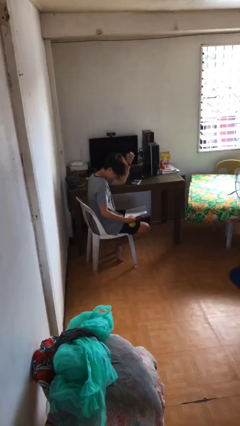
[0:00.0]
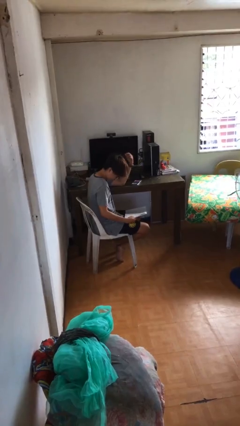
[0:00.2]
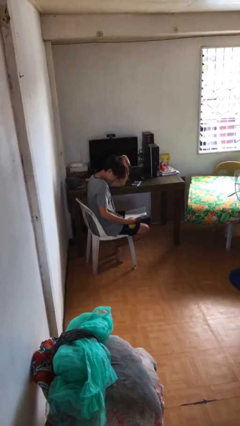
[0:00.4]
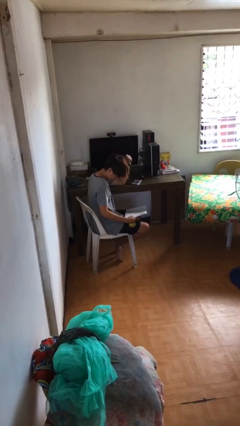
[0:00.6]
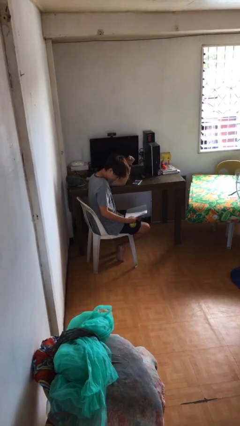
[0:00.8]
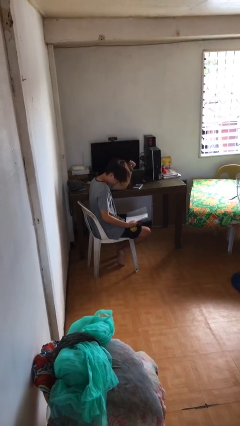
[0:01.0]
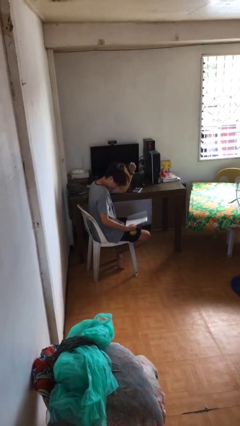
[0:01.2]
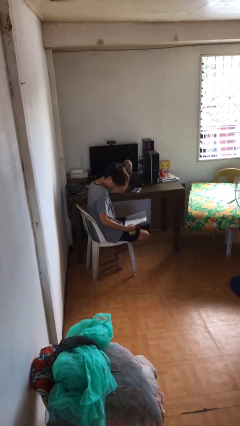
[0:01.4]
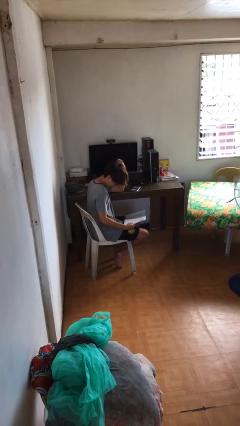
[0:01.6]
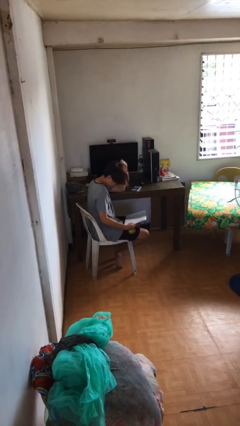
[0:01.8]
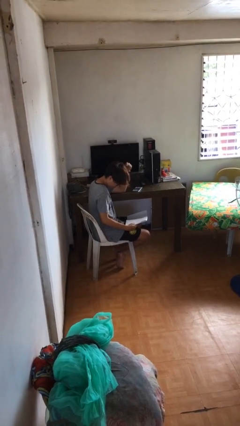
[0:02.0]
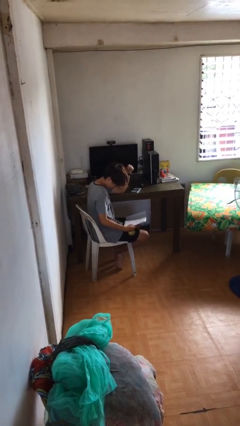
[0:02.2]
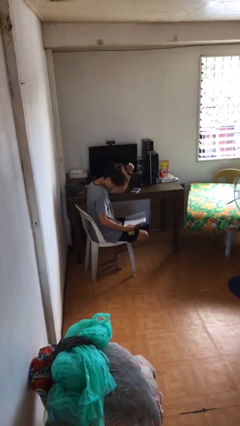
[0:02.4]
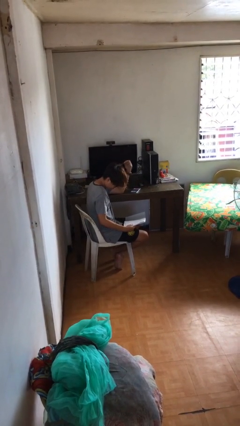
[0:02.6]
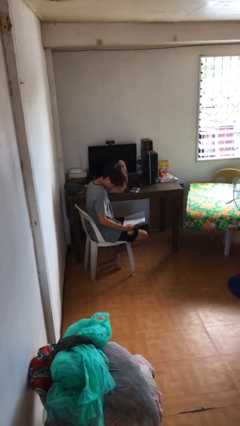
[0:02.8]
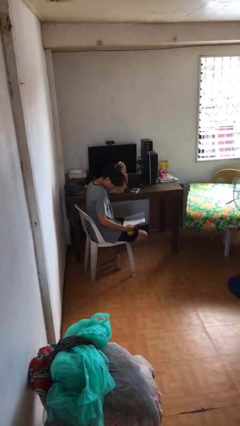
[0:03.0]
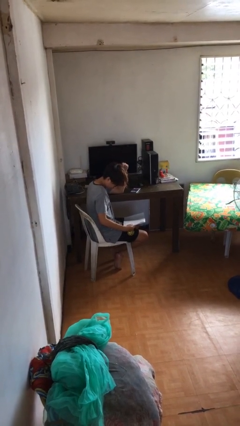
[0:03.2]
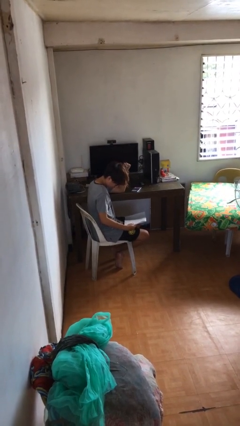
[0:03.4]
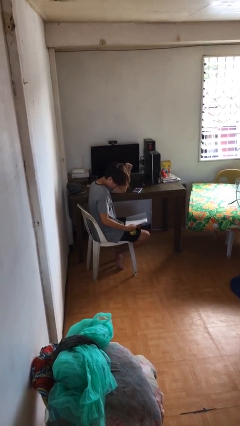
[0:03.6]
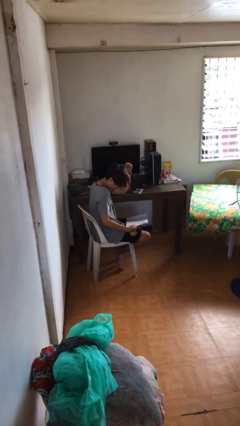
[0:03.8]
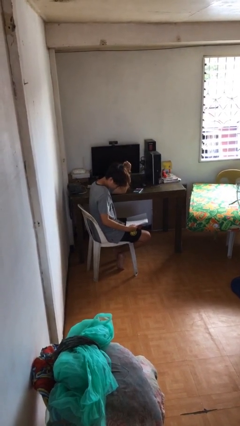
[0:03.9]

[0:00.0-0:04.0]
person reads document

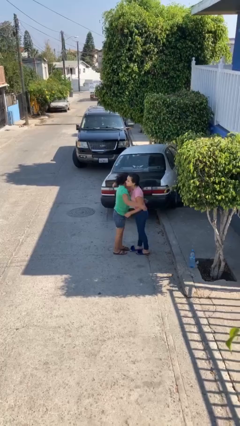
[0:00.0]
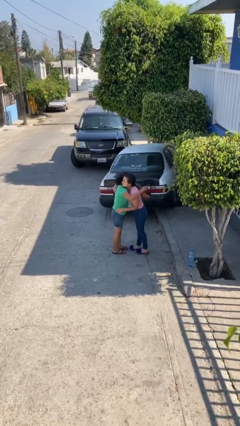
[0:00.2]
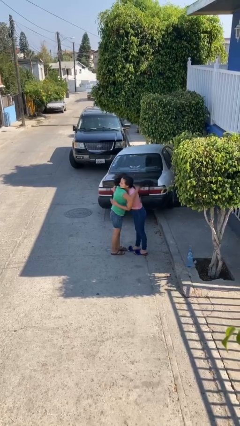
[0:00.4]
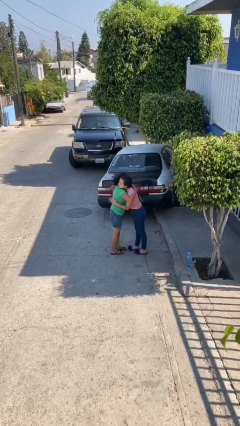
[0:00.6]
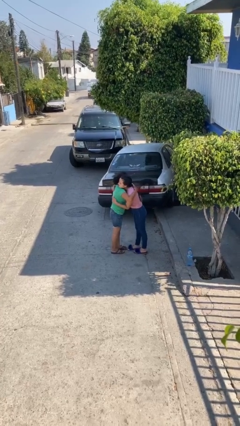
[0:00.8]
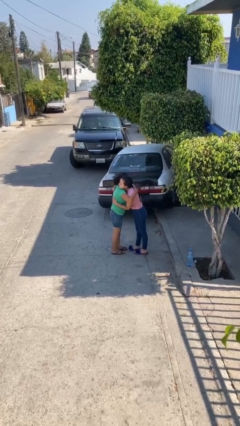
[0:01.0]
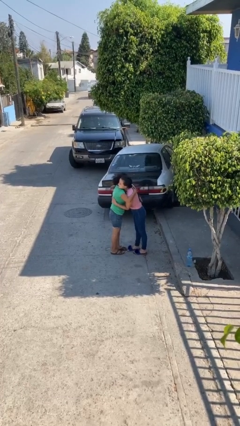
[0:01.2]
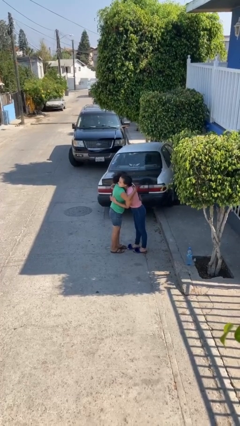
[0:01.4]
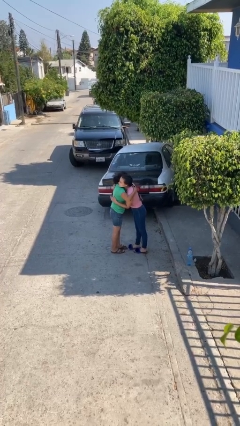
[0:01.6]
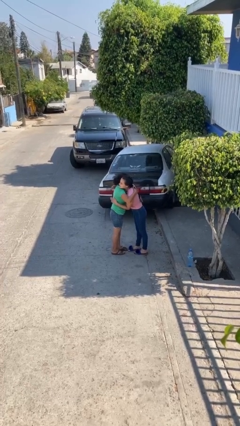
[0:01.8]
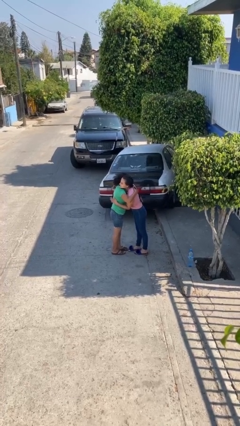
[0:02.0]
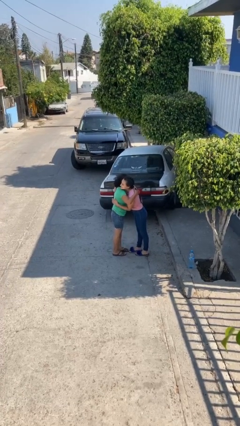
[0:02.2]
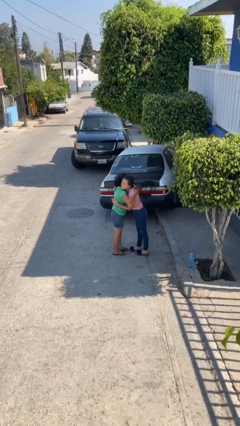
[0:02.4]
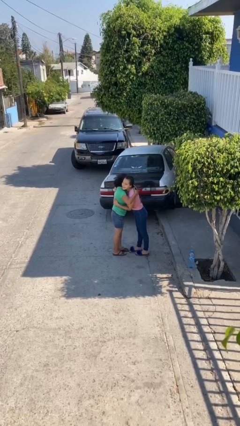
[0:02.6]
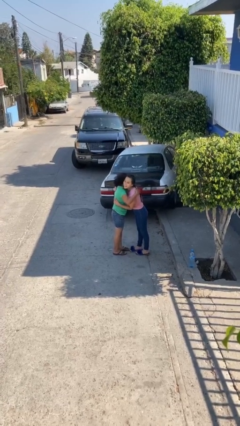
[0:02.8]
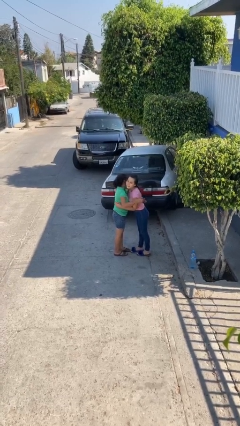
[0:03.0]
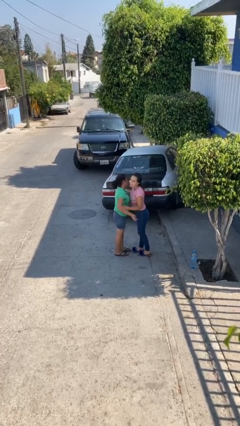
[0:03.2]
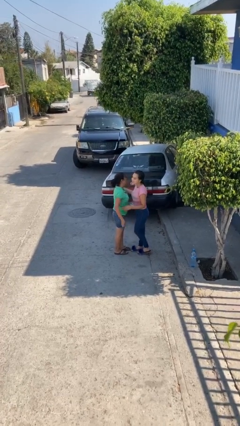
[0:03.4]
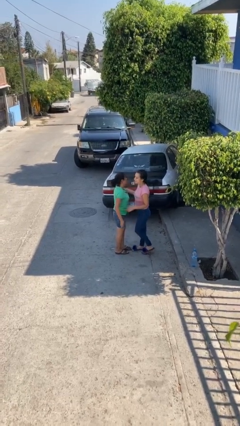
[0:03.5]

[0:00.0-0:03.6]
person embraces person

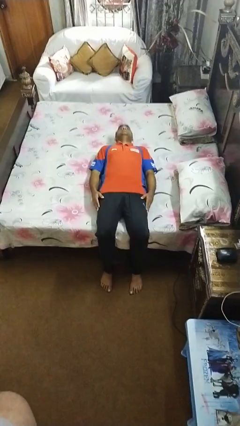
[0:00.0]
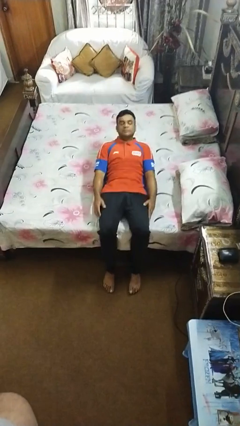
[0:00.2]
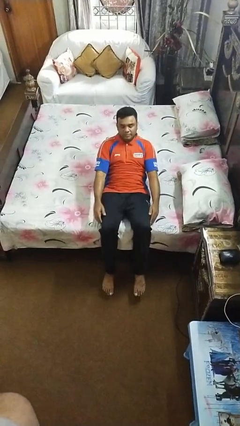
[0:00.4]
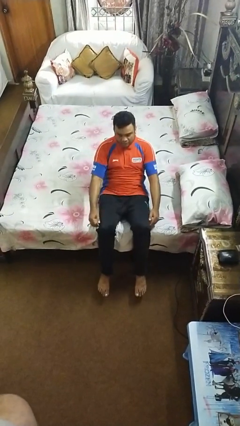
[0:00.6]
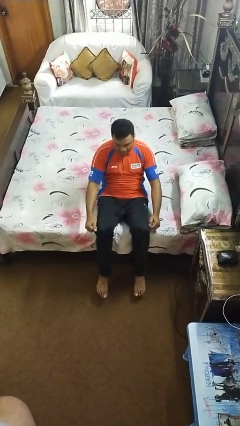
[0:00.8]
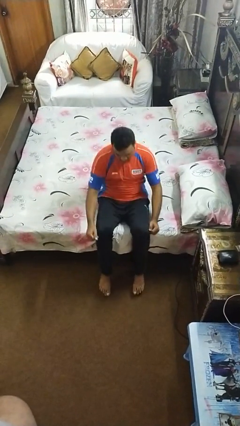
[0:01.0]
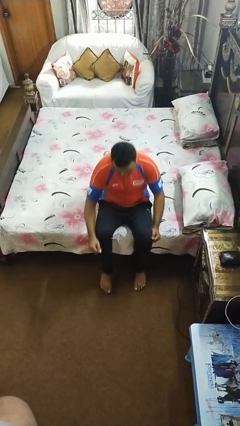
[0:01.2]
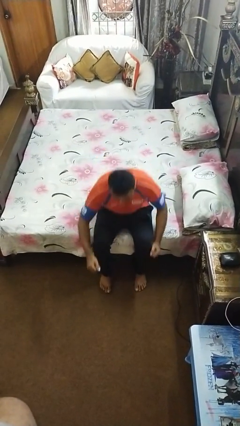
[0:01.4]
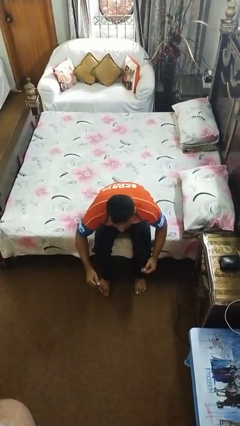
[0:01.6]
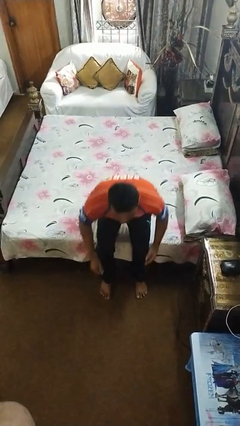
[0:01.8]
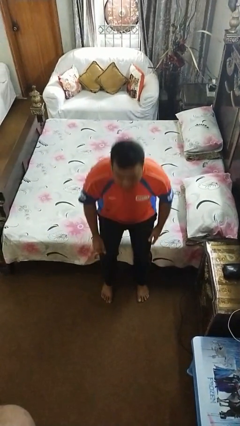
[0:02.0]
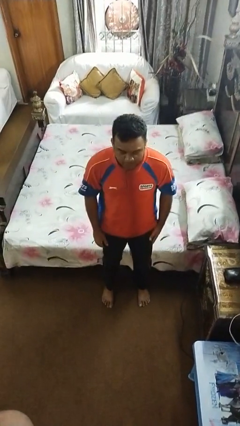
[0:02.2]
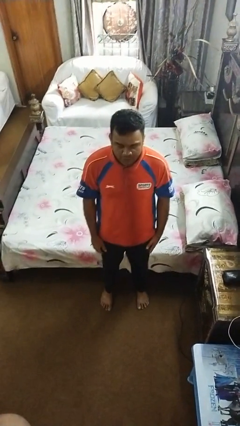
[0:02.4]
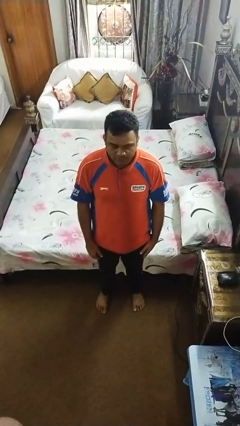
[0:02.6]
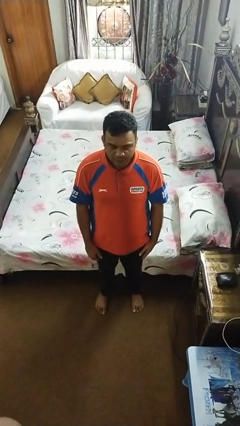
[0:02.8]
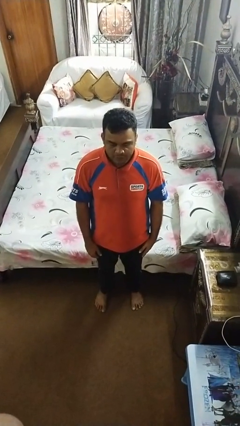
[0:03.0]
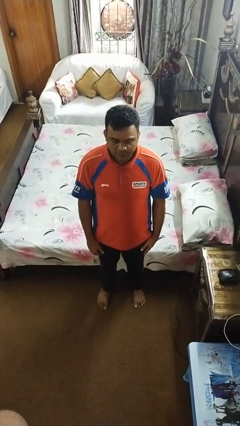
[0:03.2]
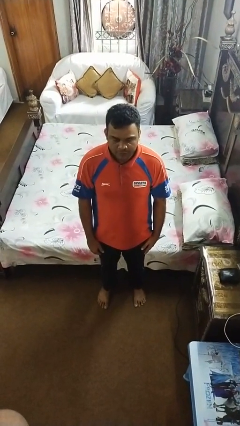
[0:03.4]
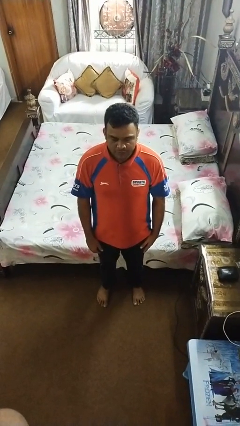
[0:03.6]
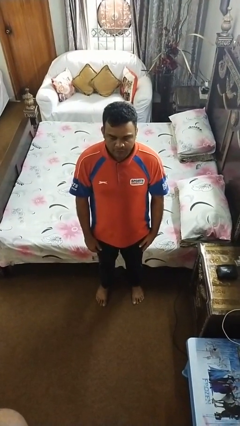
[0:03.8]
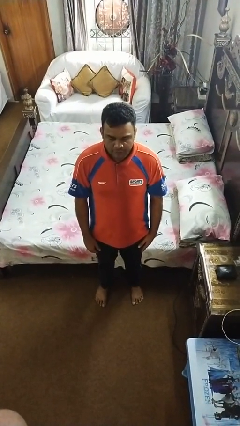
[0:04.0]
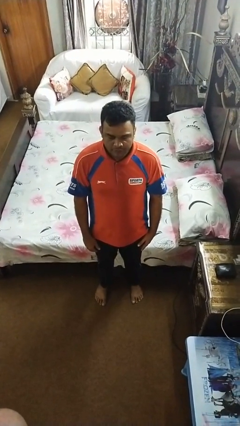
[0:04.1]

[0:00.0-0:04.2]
person stands up

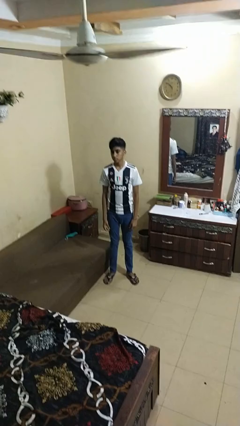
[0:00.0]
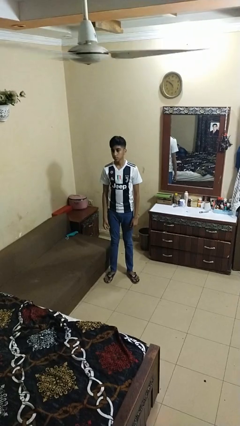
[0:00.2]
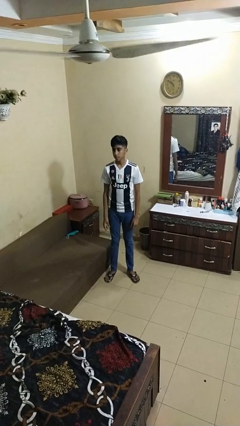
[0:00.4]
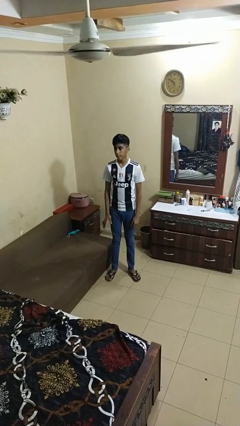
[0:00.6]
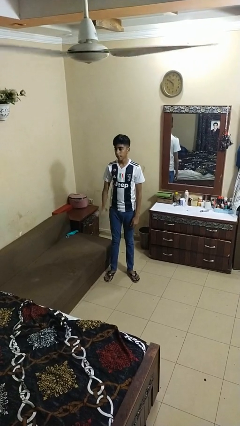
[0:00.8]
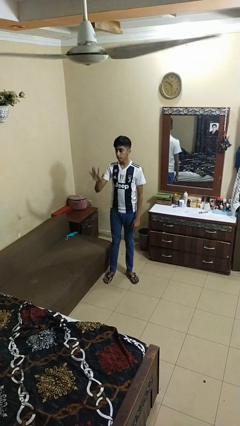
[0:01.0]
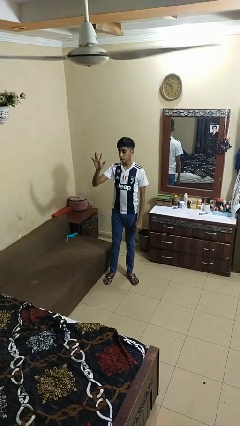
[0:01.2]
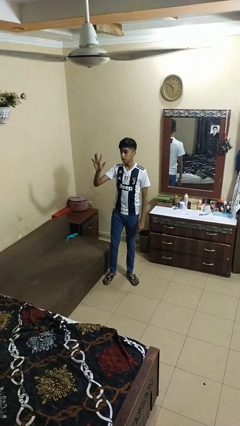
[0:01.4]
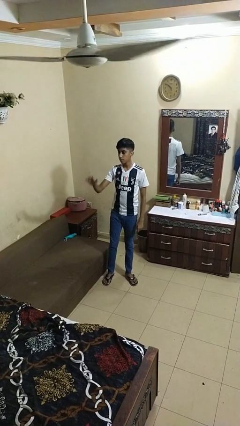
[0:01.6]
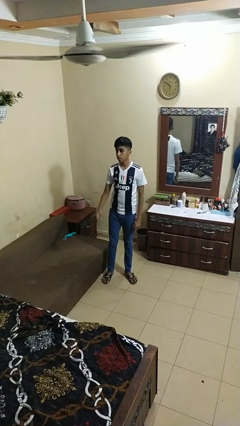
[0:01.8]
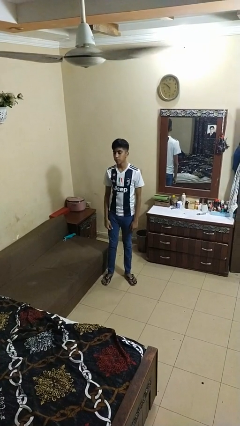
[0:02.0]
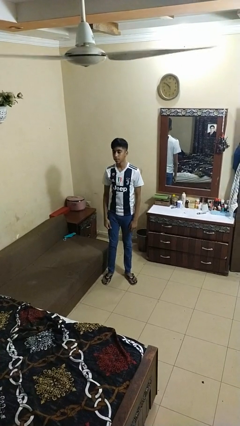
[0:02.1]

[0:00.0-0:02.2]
person gestures number five

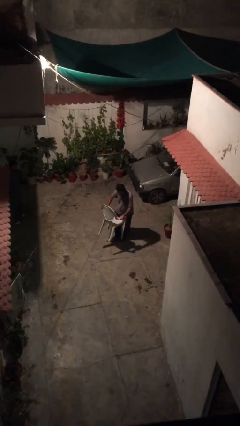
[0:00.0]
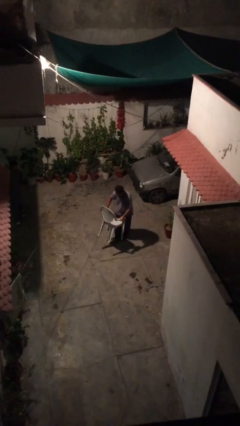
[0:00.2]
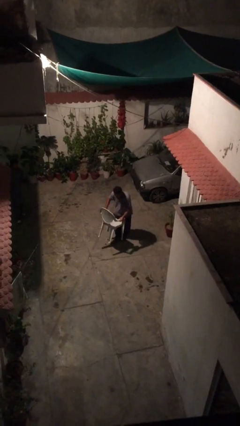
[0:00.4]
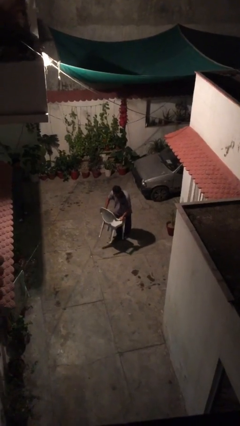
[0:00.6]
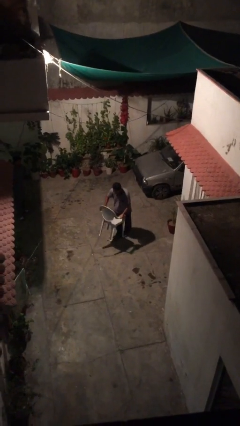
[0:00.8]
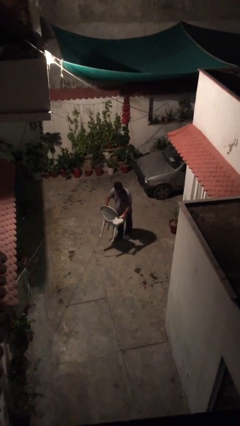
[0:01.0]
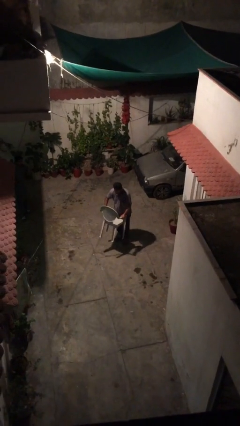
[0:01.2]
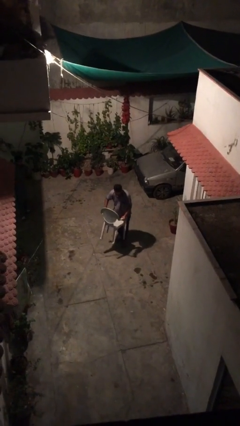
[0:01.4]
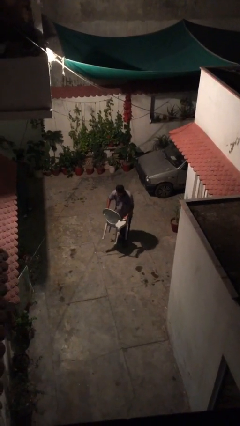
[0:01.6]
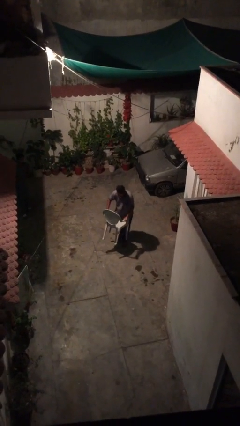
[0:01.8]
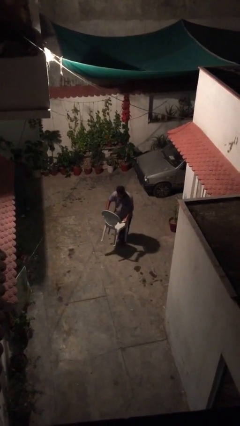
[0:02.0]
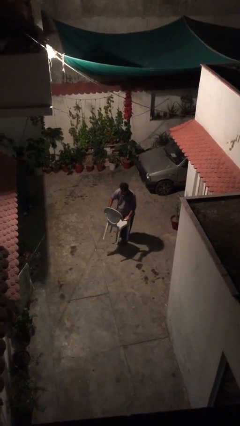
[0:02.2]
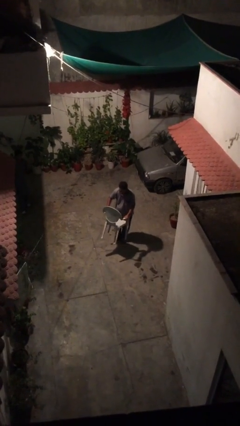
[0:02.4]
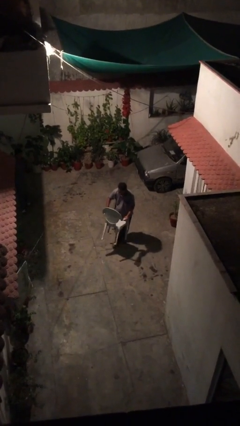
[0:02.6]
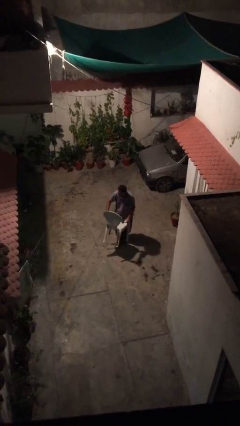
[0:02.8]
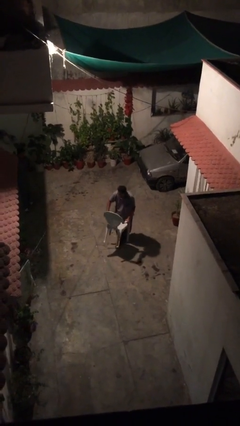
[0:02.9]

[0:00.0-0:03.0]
person carries heavy object

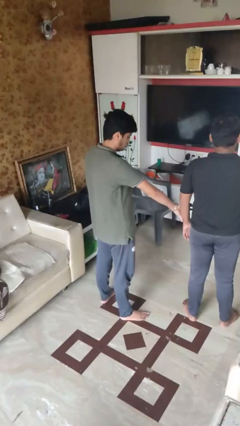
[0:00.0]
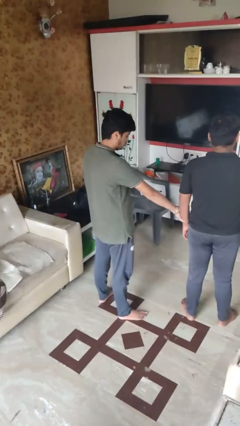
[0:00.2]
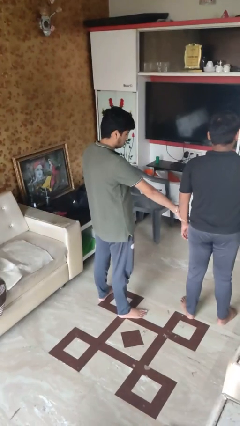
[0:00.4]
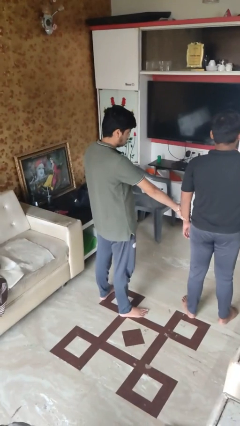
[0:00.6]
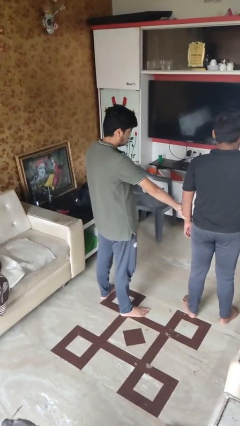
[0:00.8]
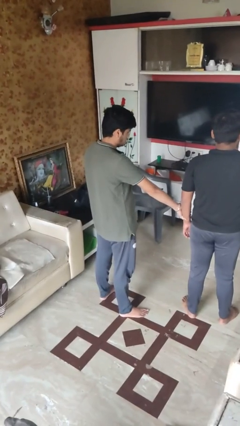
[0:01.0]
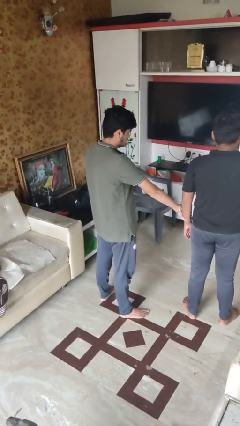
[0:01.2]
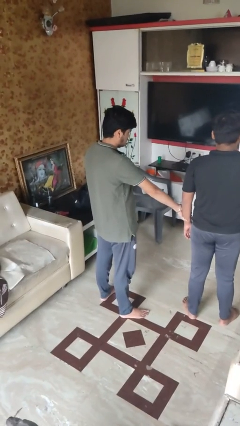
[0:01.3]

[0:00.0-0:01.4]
person grabs person by forearm
